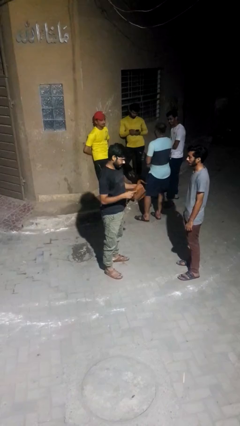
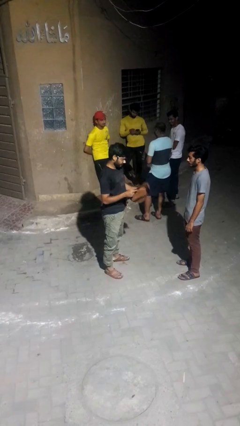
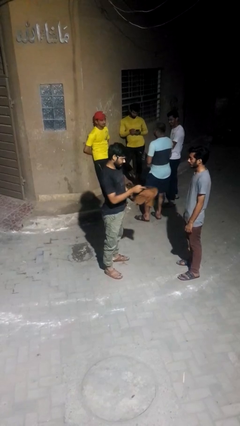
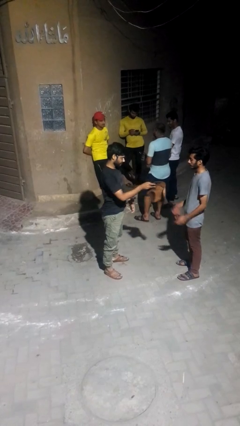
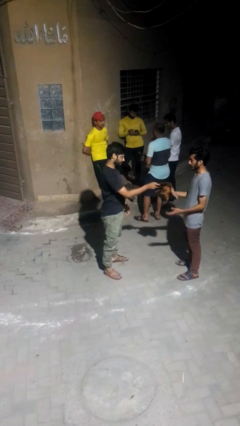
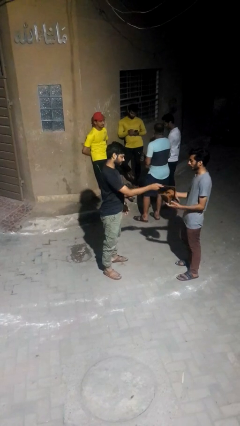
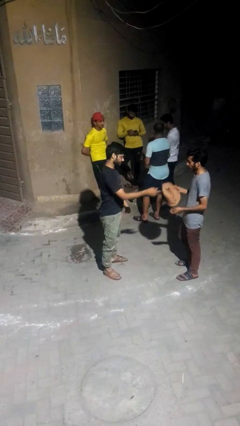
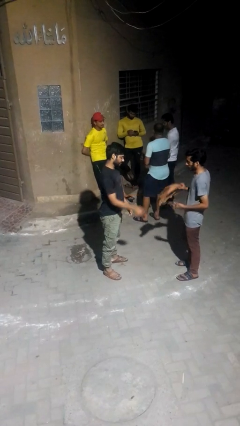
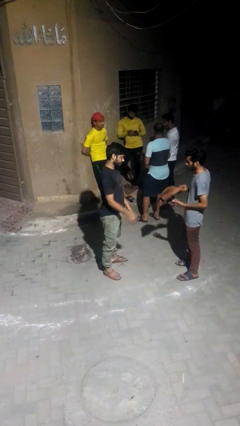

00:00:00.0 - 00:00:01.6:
person transfers object to person

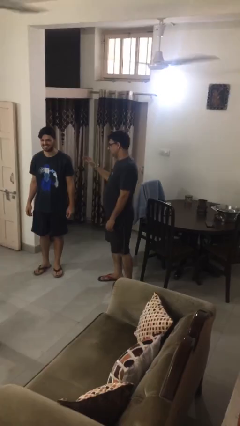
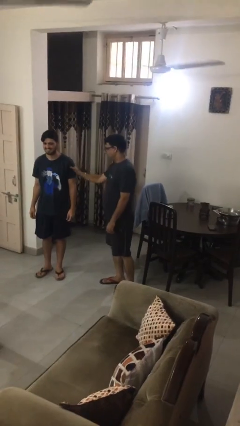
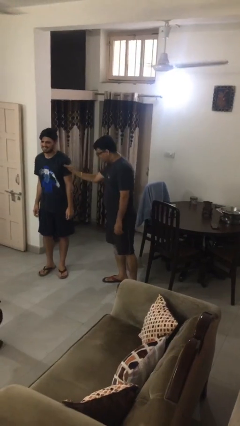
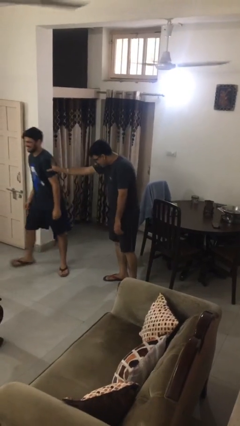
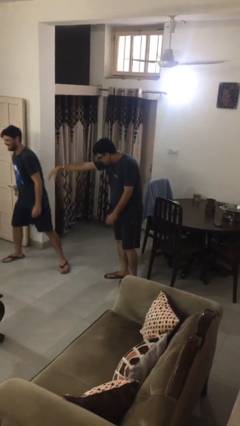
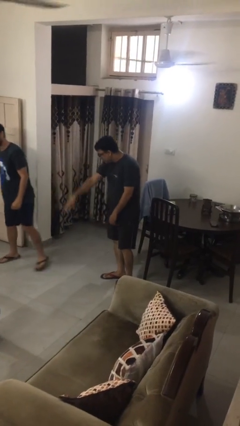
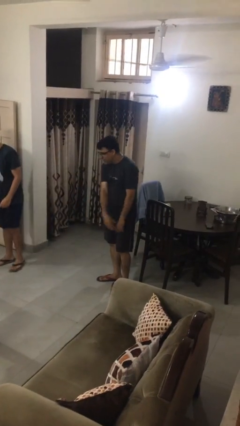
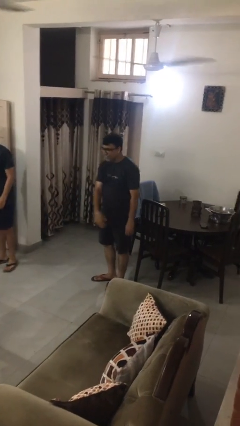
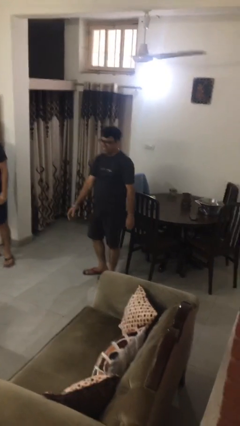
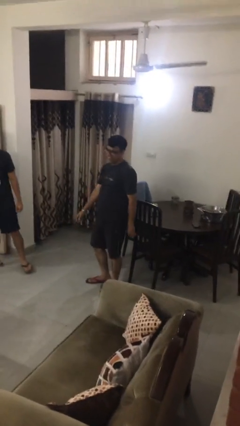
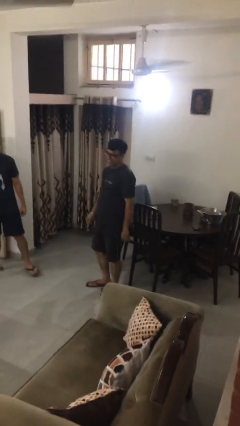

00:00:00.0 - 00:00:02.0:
person shoves person

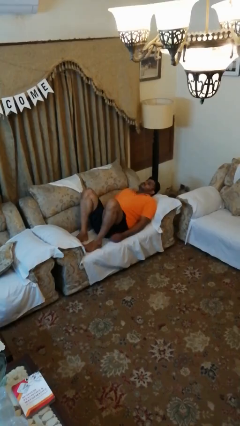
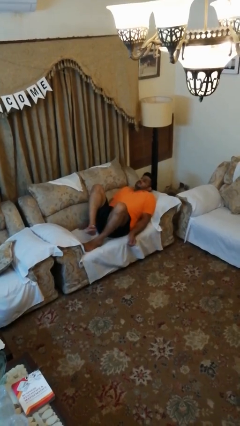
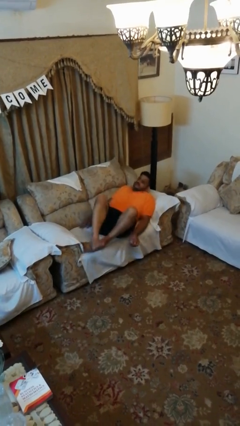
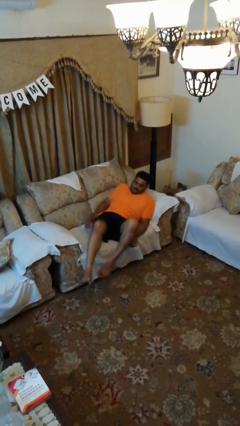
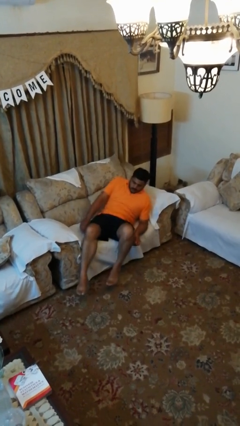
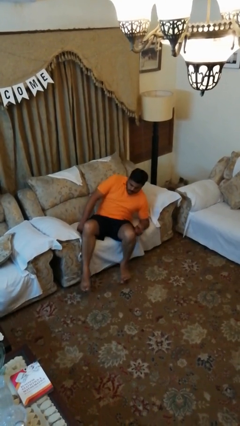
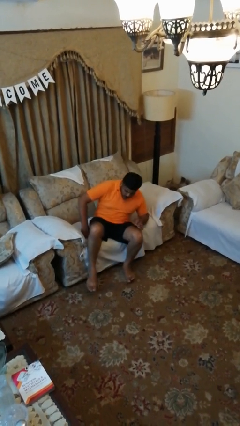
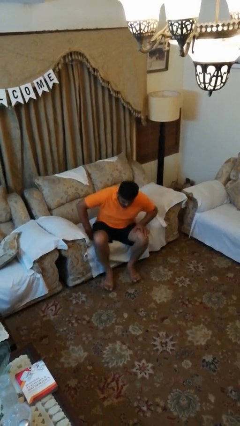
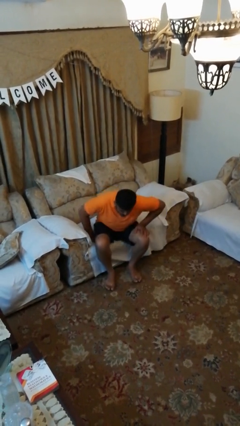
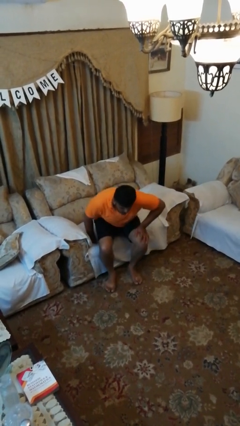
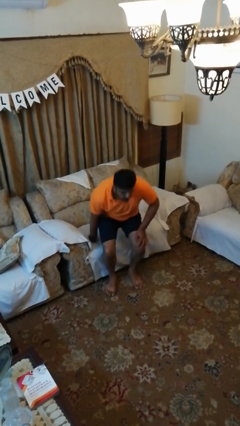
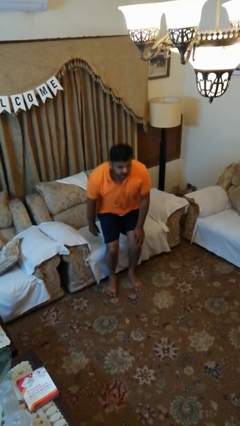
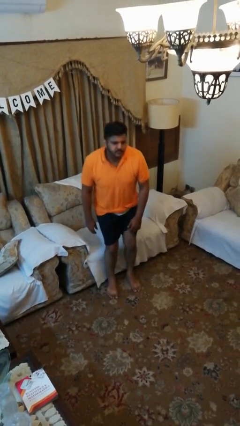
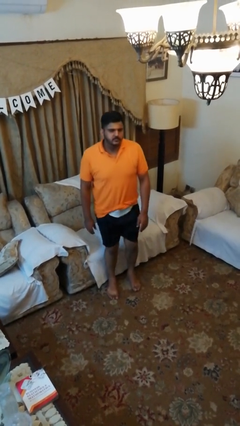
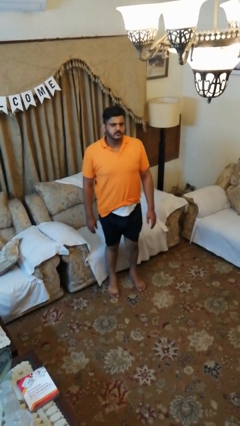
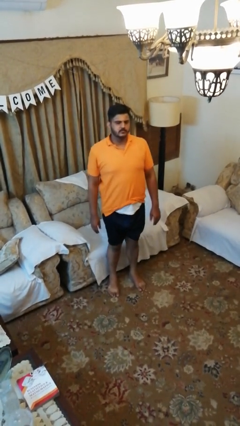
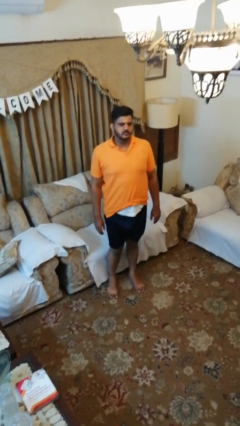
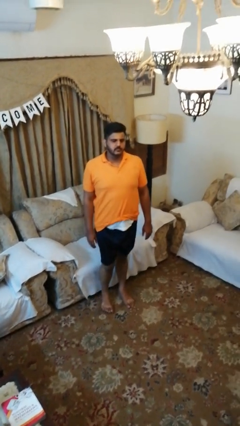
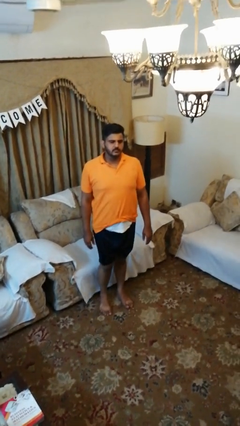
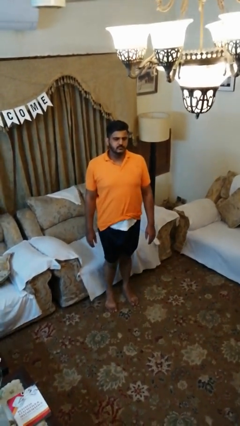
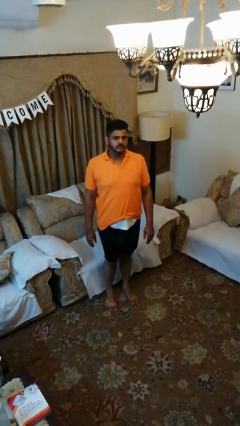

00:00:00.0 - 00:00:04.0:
person stands up

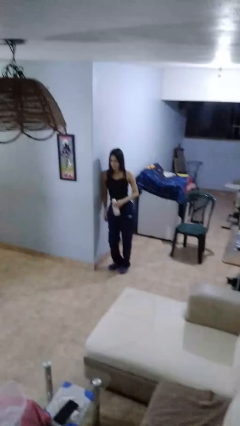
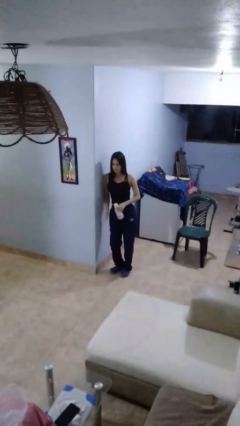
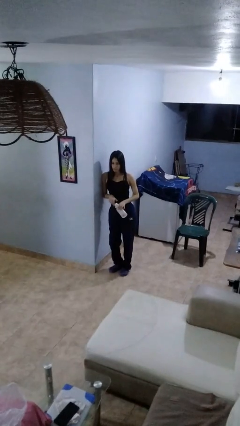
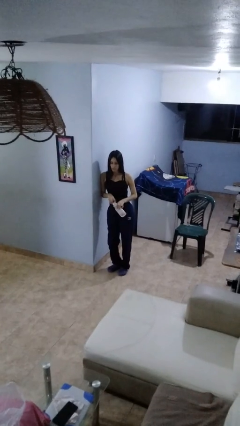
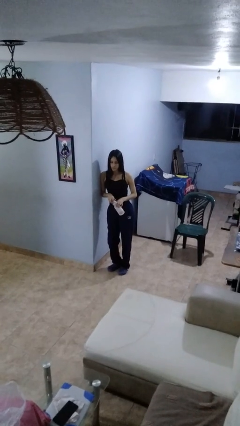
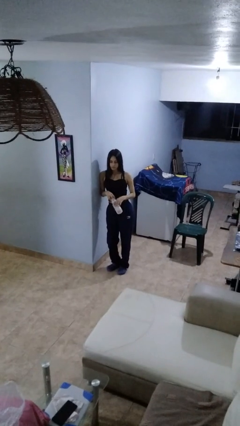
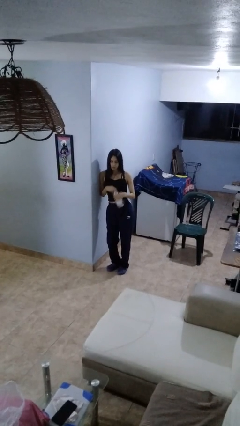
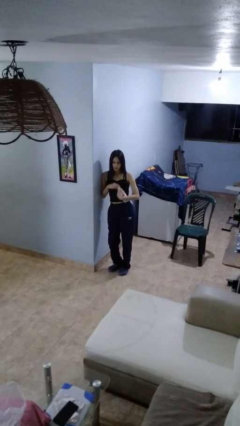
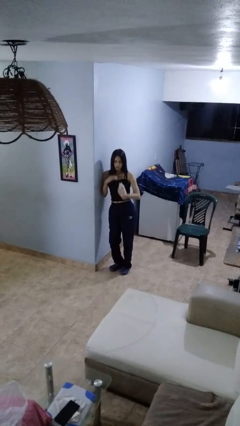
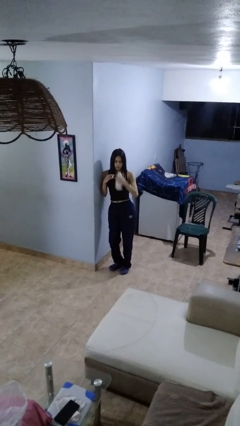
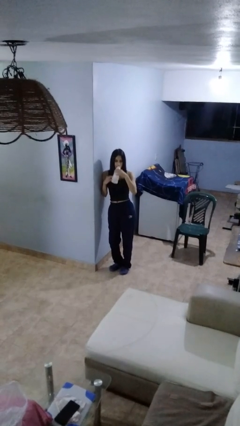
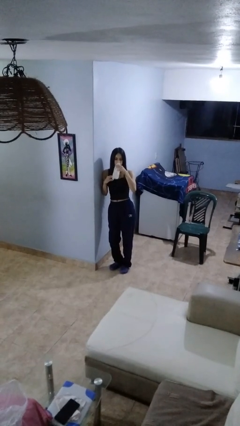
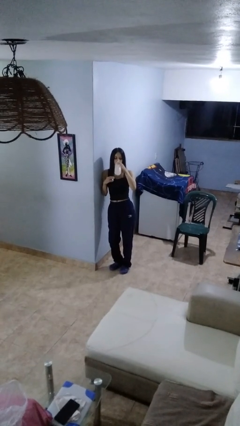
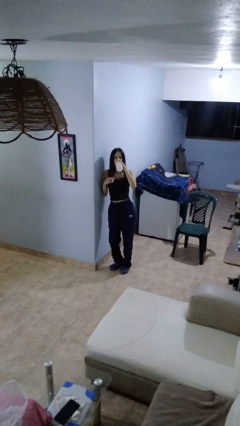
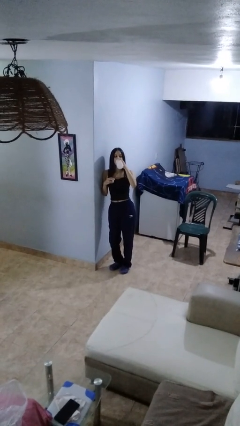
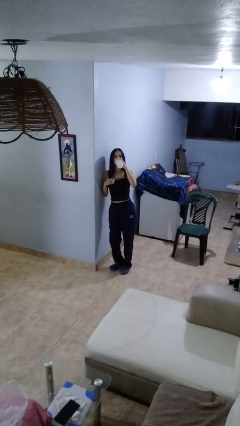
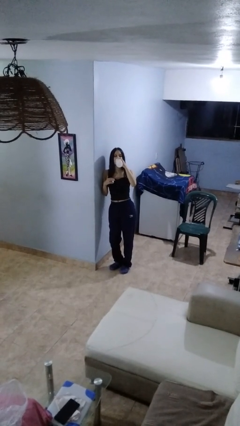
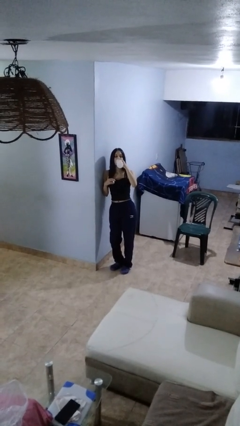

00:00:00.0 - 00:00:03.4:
person drinks from bottle

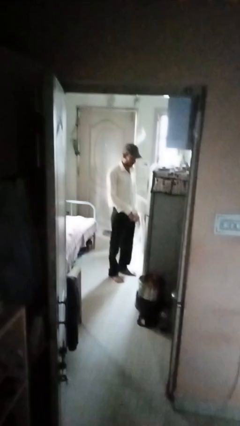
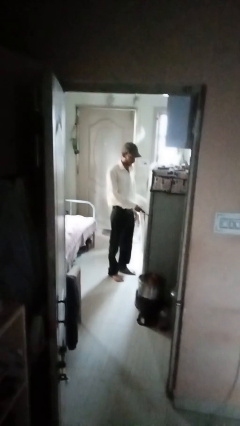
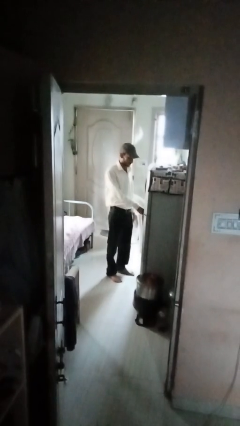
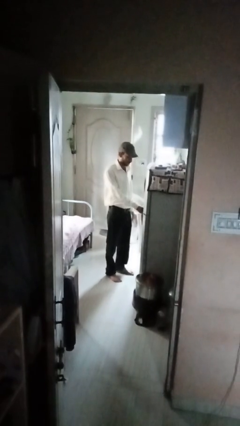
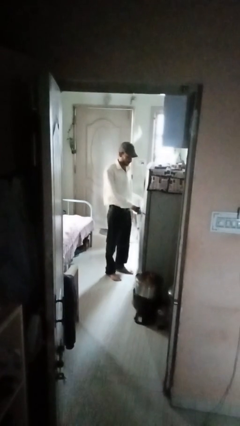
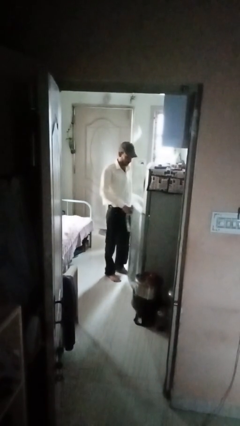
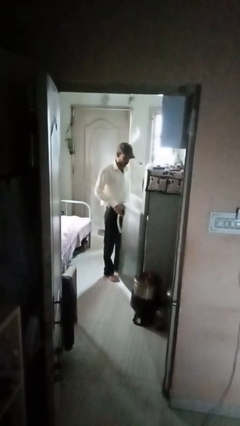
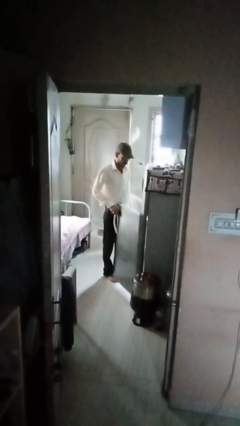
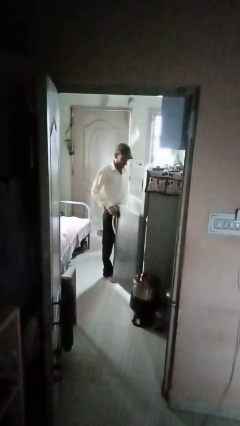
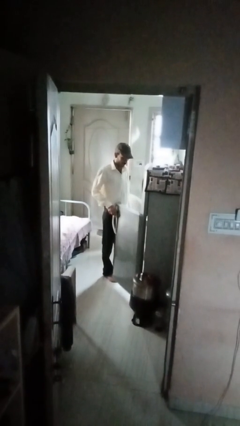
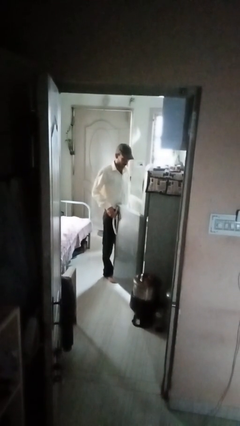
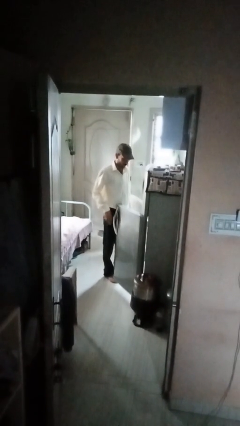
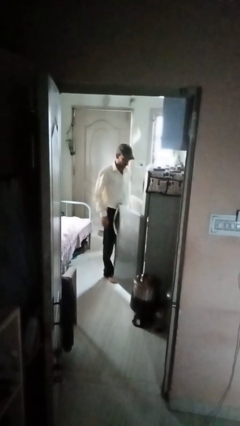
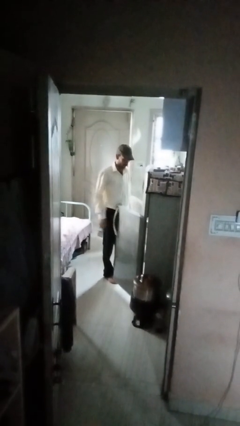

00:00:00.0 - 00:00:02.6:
person opens refrigerator

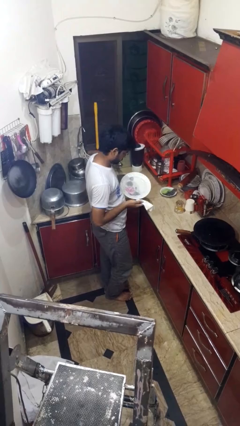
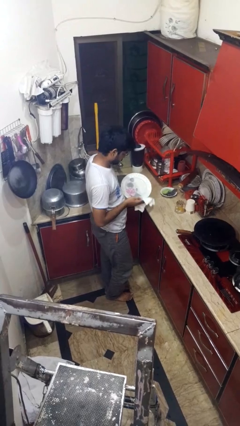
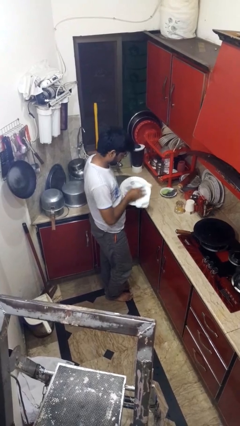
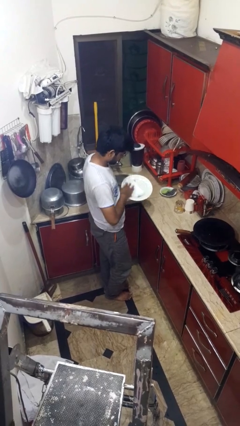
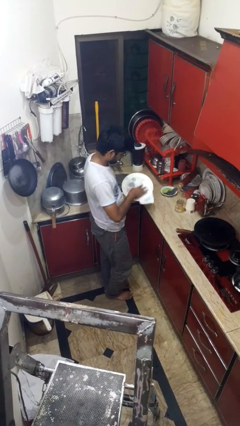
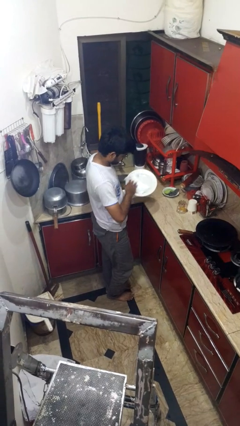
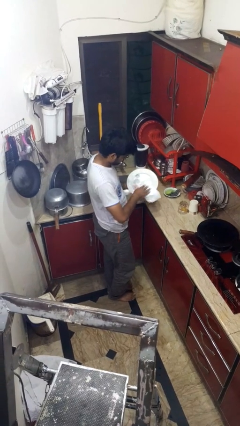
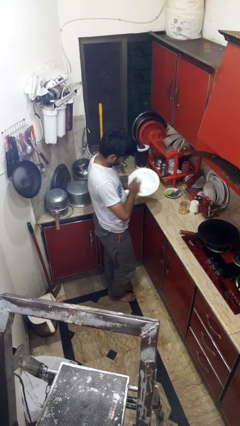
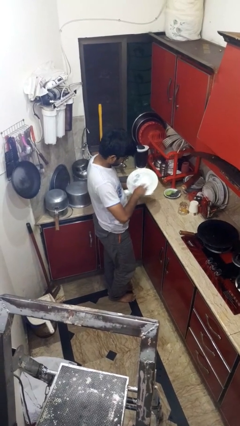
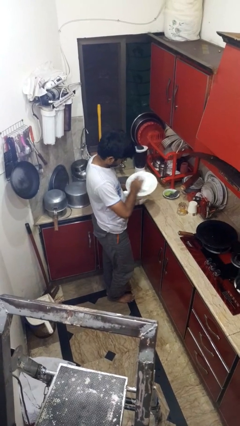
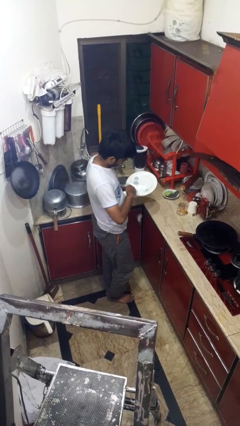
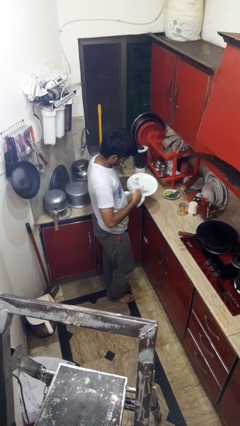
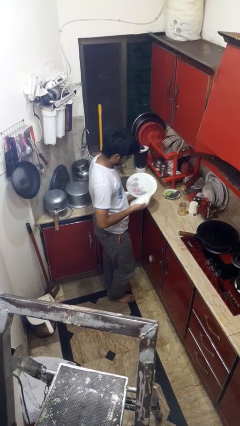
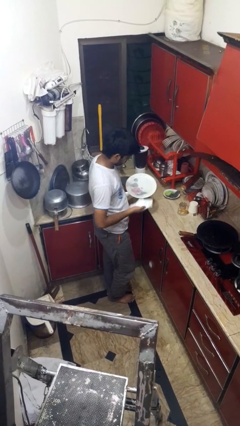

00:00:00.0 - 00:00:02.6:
person dries dish

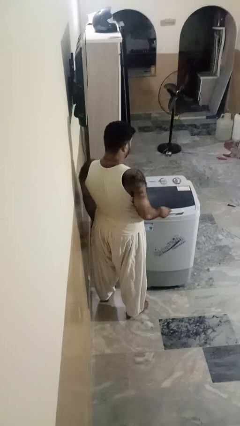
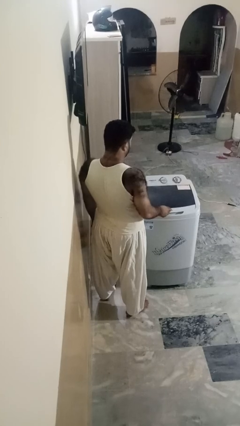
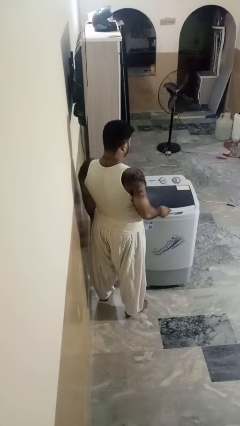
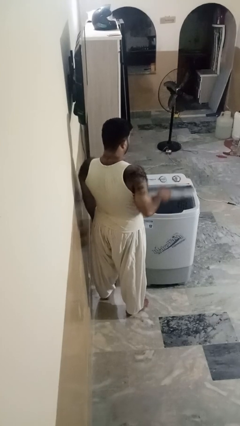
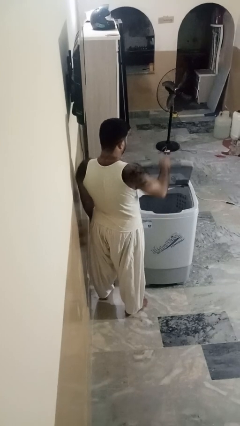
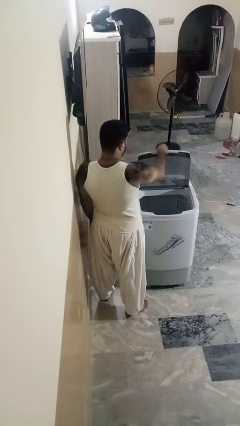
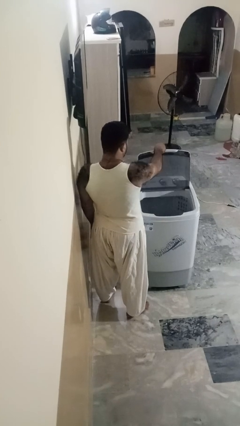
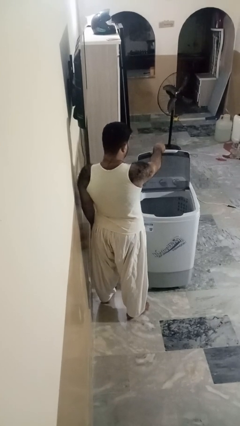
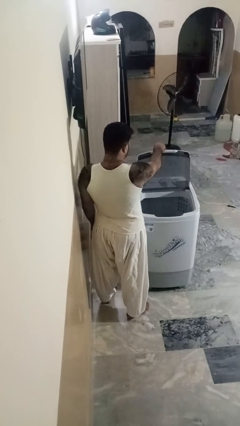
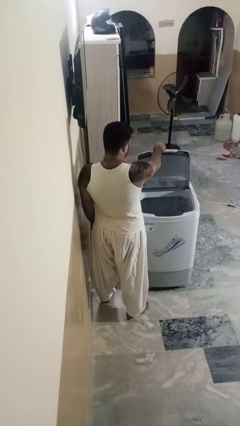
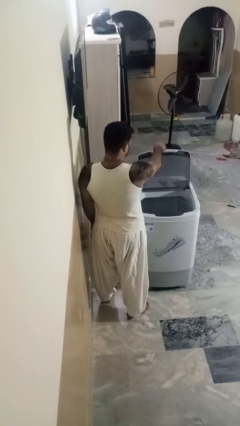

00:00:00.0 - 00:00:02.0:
person opens clothes washer
